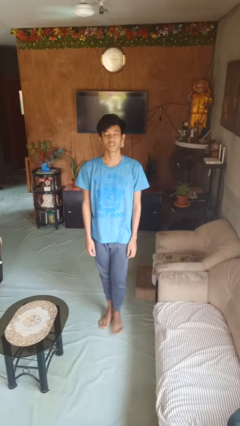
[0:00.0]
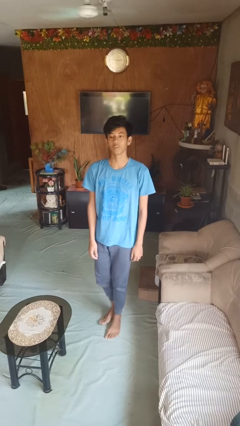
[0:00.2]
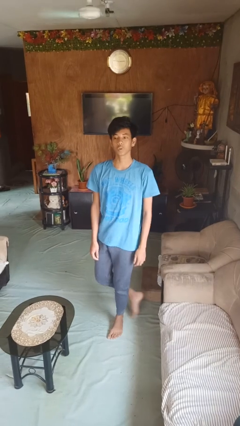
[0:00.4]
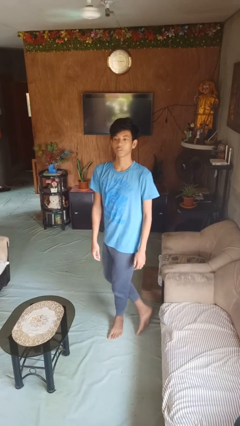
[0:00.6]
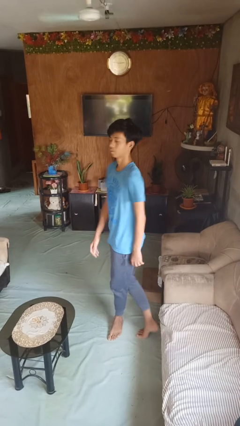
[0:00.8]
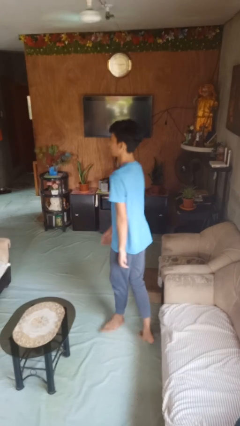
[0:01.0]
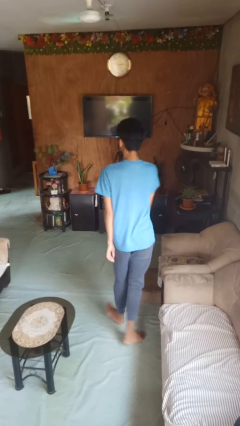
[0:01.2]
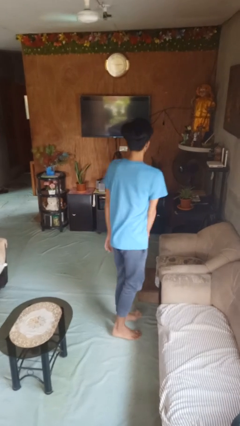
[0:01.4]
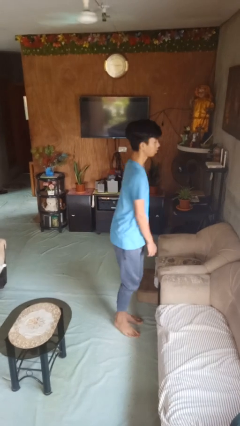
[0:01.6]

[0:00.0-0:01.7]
person twirls

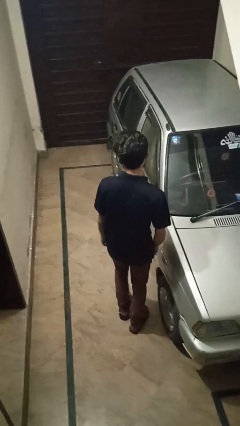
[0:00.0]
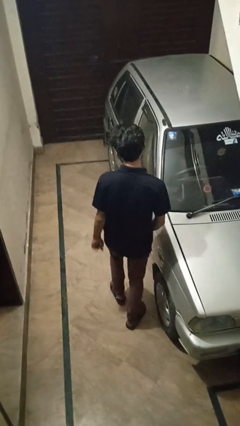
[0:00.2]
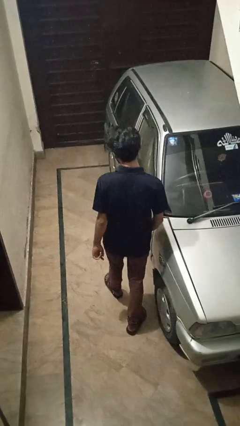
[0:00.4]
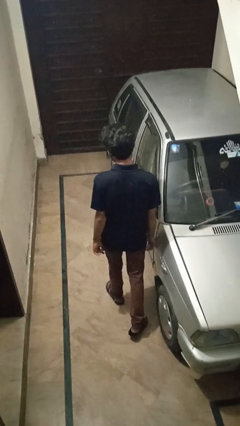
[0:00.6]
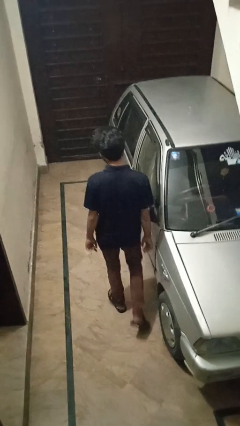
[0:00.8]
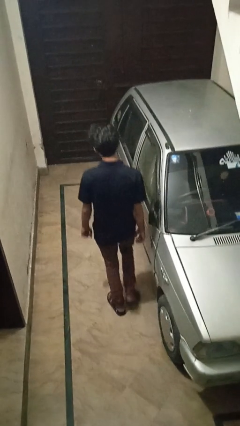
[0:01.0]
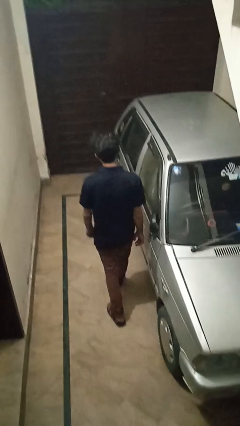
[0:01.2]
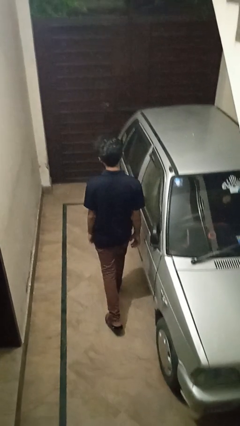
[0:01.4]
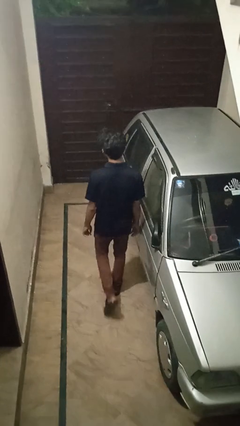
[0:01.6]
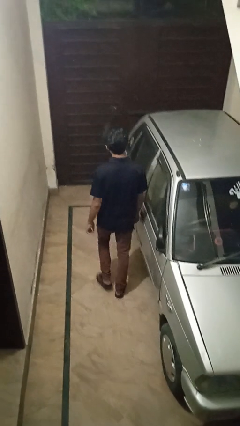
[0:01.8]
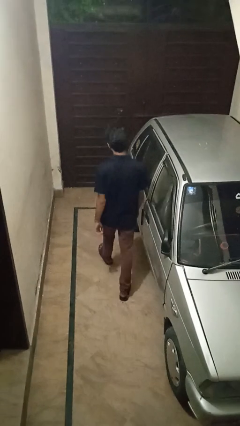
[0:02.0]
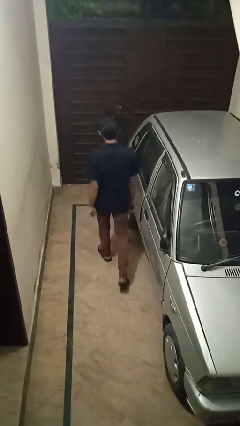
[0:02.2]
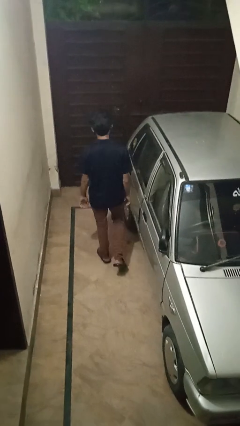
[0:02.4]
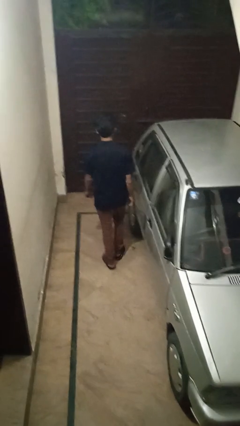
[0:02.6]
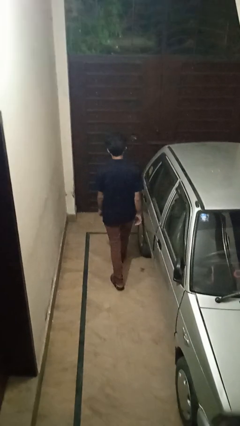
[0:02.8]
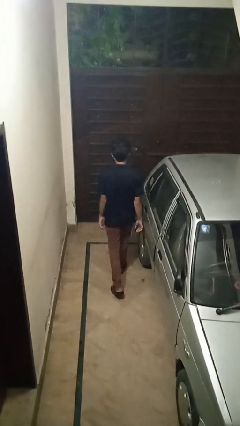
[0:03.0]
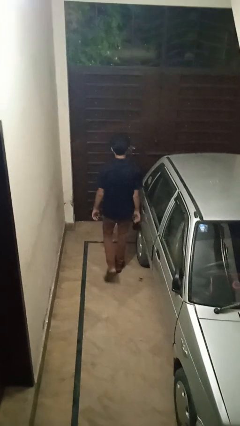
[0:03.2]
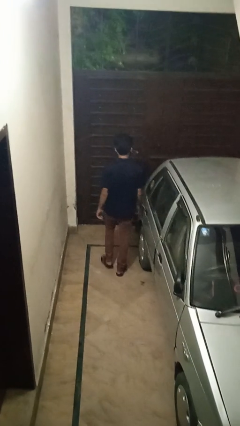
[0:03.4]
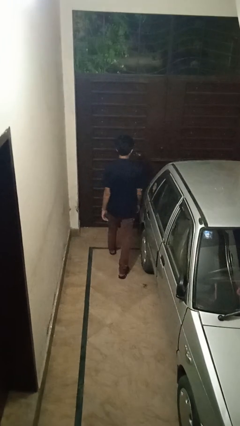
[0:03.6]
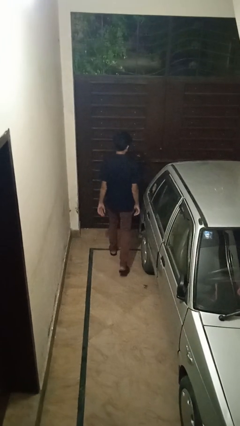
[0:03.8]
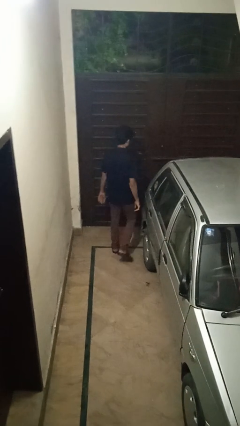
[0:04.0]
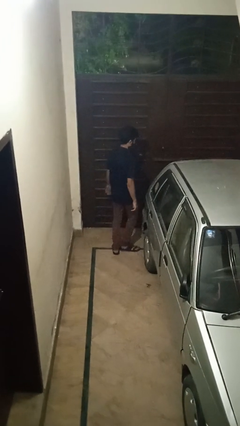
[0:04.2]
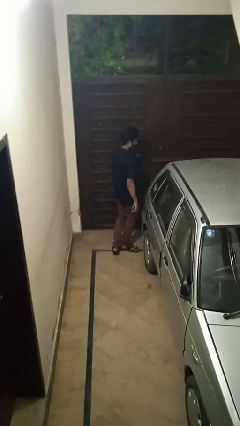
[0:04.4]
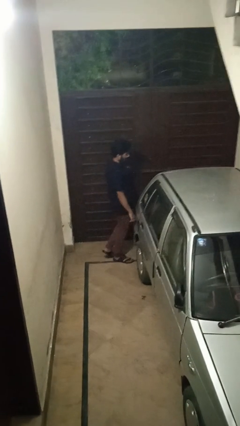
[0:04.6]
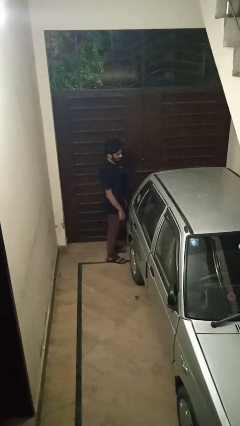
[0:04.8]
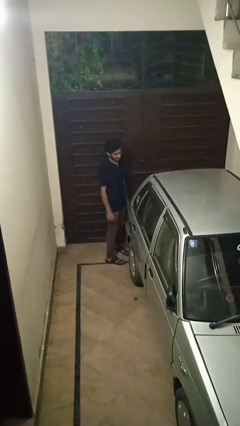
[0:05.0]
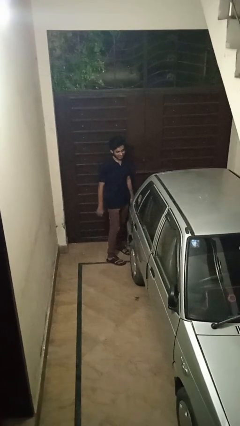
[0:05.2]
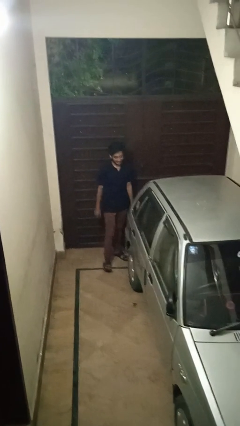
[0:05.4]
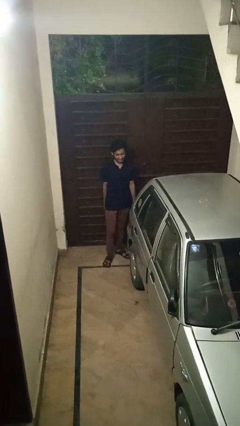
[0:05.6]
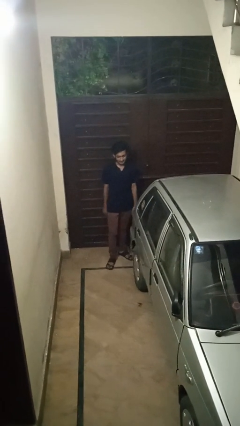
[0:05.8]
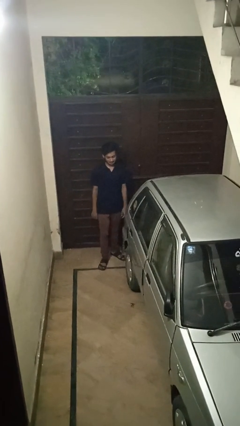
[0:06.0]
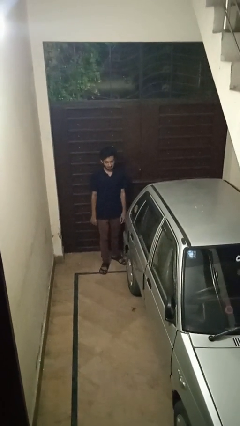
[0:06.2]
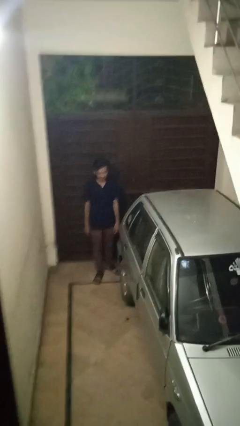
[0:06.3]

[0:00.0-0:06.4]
person walks around car

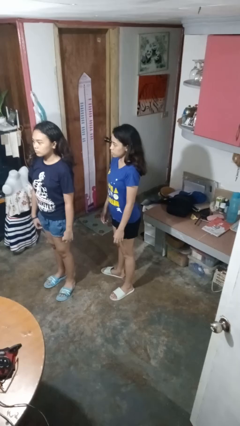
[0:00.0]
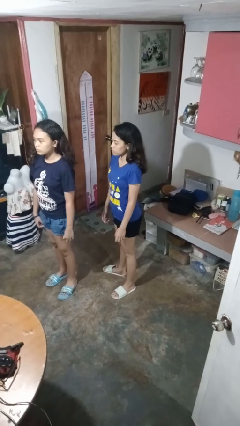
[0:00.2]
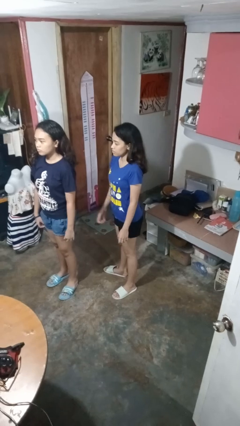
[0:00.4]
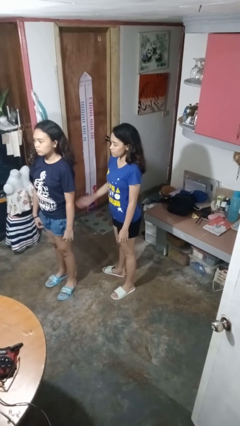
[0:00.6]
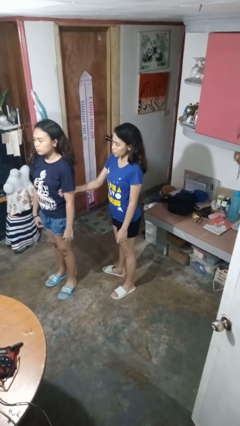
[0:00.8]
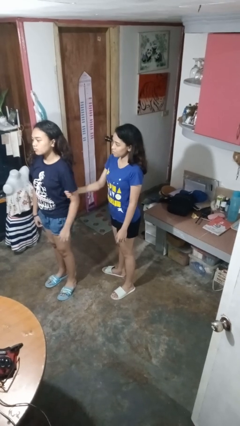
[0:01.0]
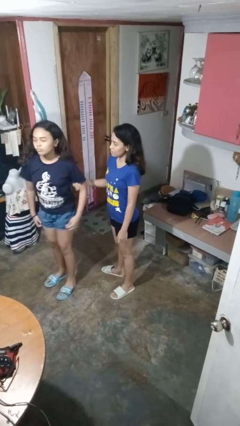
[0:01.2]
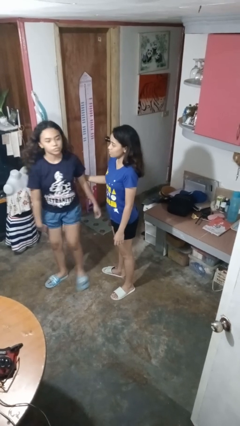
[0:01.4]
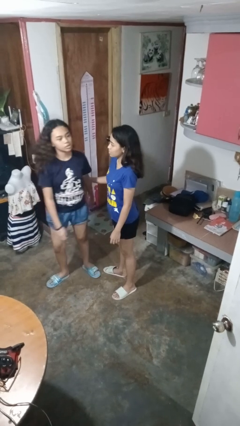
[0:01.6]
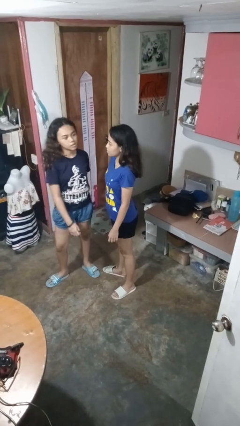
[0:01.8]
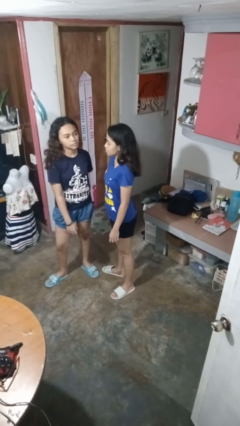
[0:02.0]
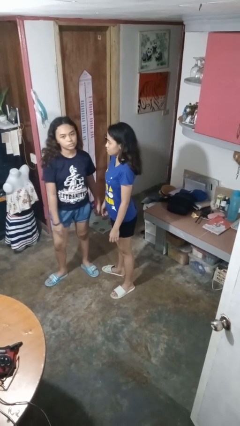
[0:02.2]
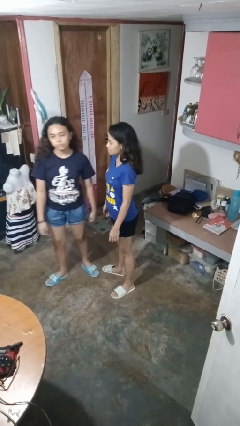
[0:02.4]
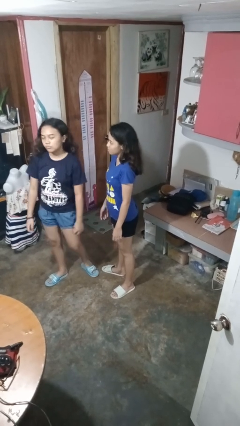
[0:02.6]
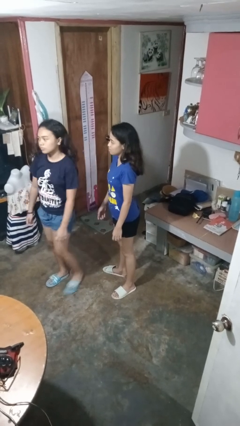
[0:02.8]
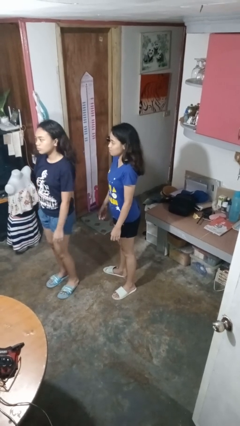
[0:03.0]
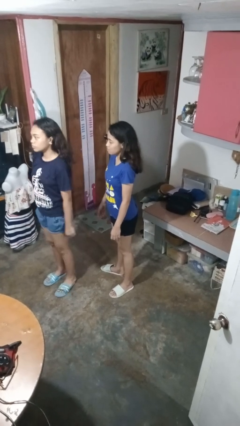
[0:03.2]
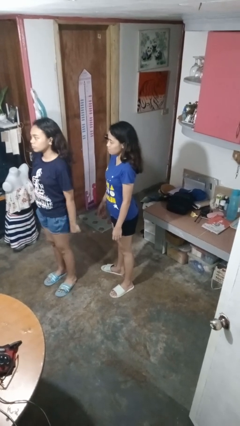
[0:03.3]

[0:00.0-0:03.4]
person grabs person by bicep

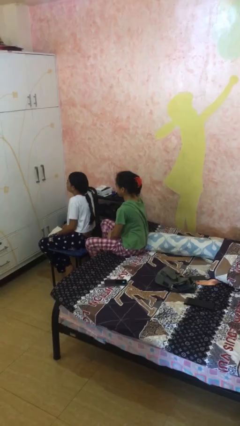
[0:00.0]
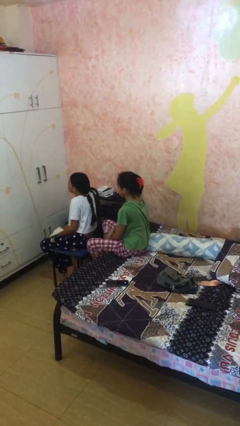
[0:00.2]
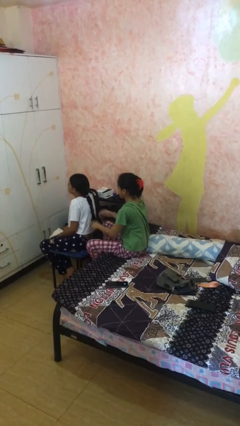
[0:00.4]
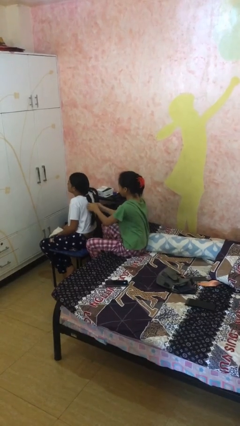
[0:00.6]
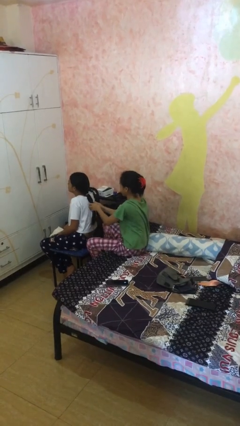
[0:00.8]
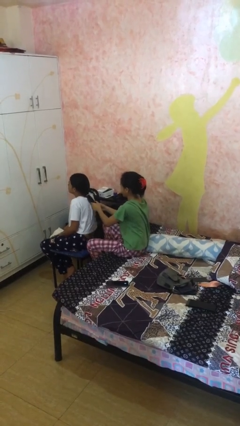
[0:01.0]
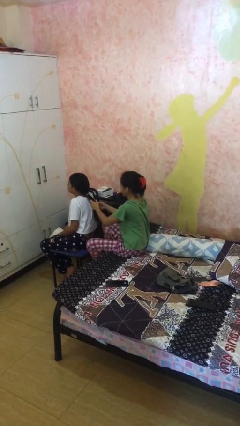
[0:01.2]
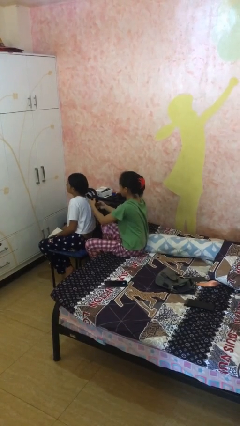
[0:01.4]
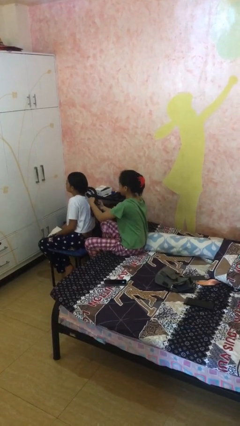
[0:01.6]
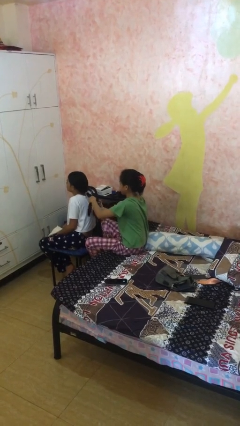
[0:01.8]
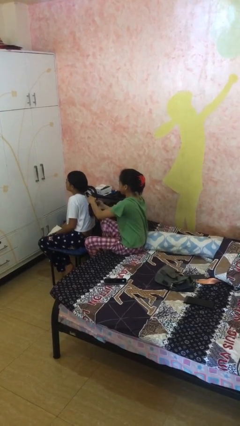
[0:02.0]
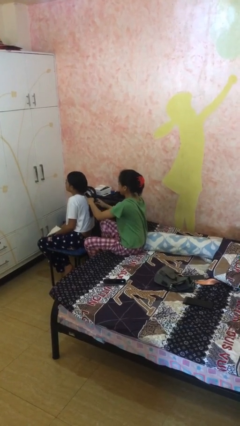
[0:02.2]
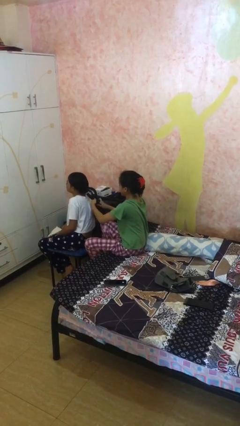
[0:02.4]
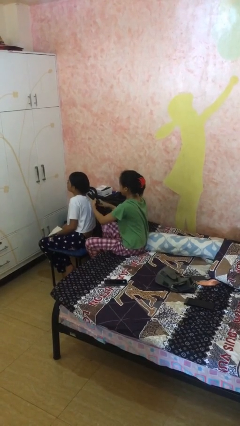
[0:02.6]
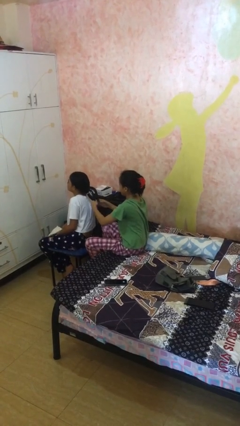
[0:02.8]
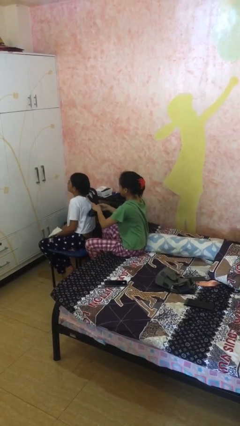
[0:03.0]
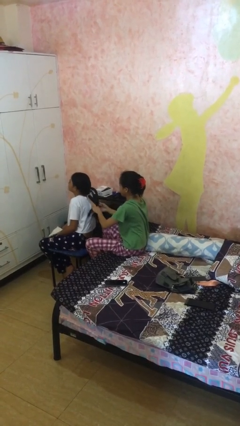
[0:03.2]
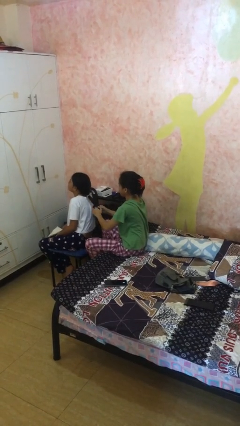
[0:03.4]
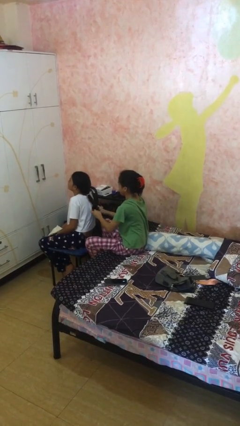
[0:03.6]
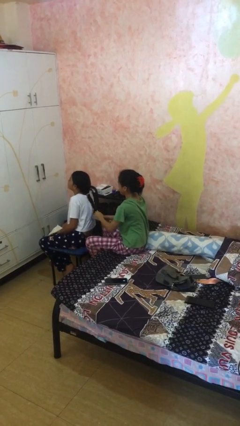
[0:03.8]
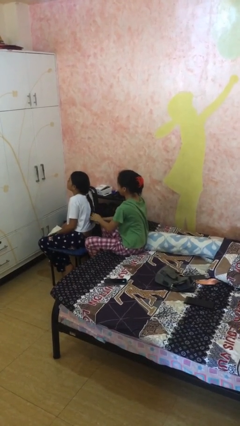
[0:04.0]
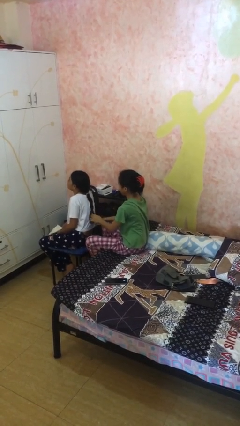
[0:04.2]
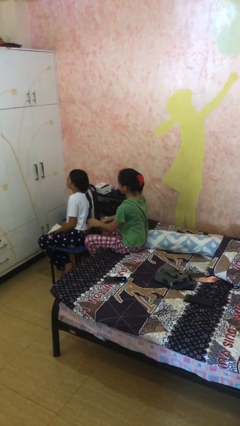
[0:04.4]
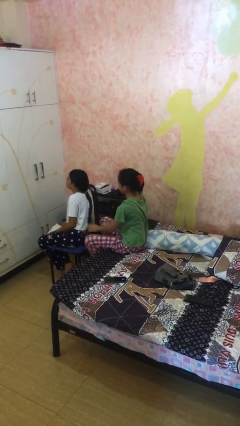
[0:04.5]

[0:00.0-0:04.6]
person braids hair of person

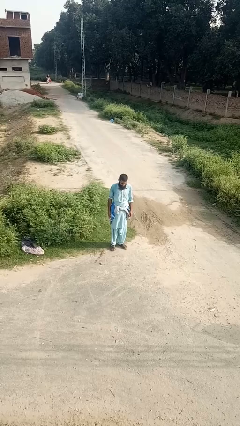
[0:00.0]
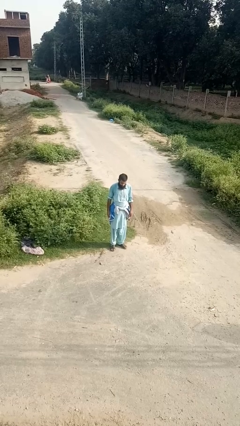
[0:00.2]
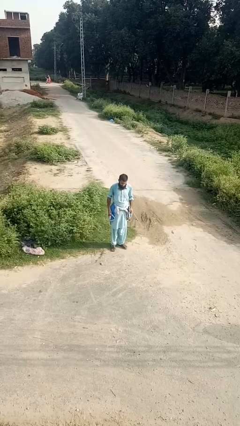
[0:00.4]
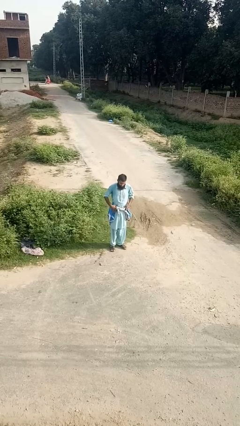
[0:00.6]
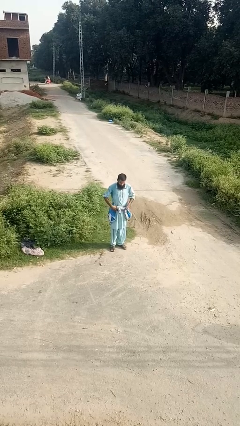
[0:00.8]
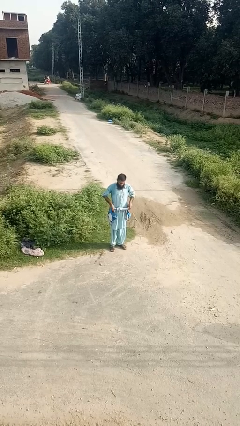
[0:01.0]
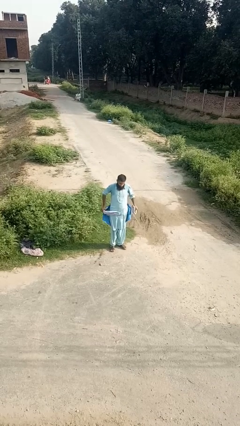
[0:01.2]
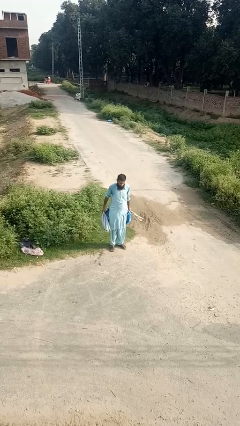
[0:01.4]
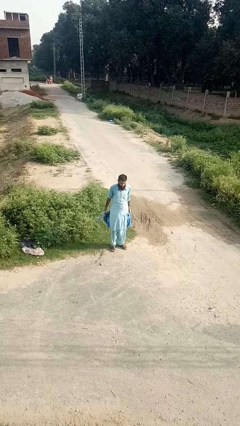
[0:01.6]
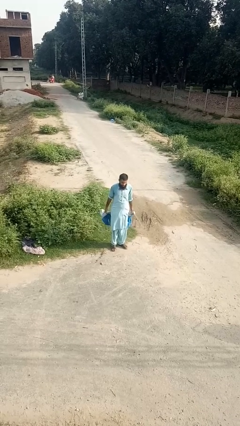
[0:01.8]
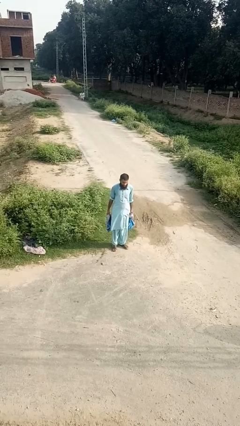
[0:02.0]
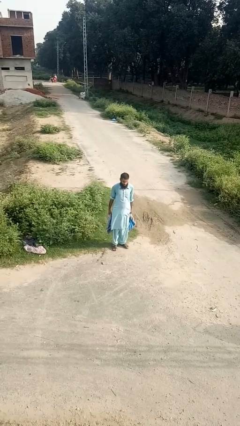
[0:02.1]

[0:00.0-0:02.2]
person unties jacket around waist
